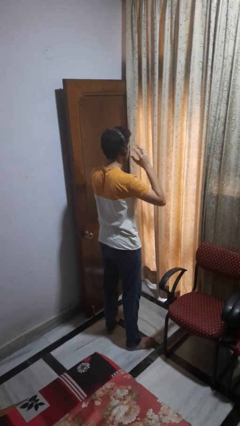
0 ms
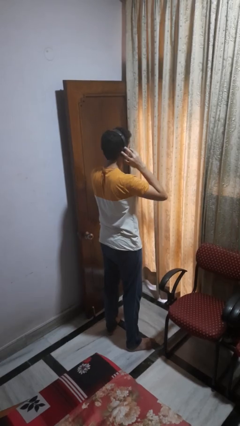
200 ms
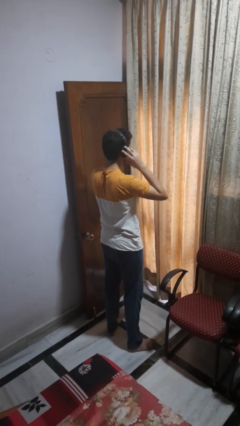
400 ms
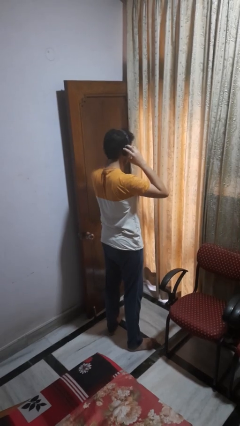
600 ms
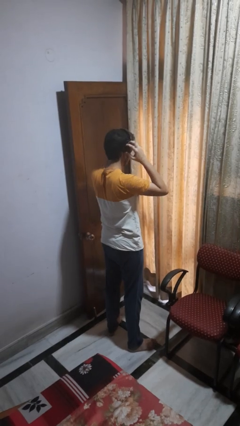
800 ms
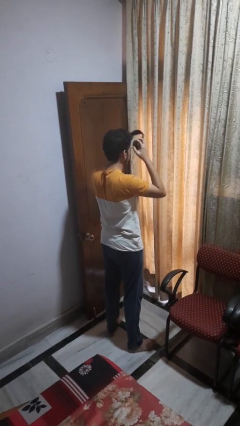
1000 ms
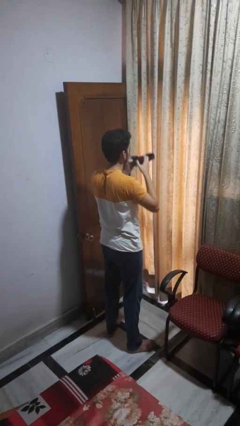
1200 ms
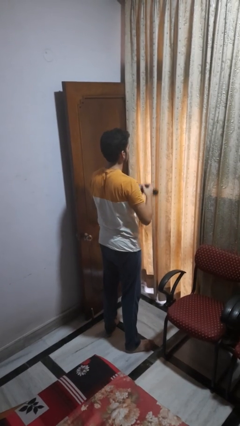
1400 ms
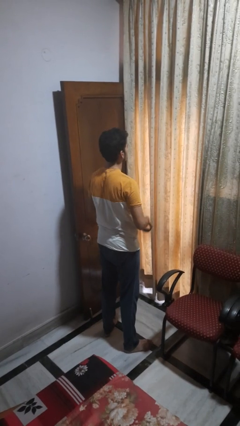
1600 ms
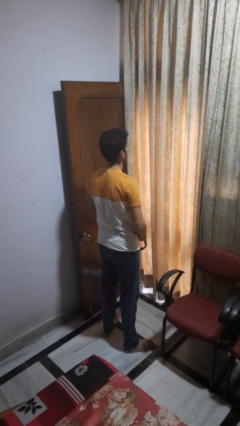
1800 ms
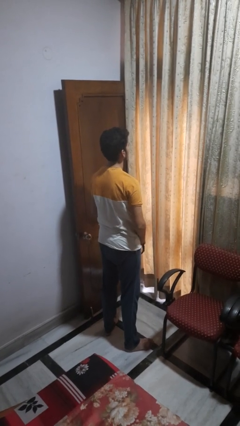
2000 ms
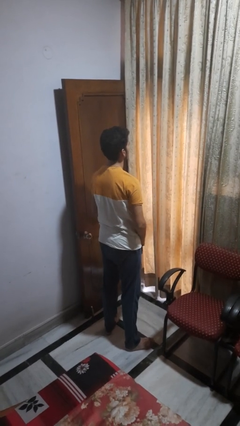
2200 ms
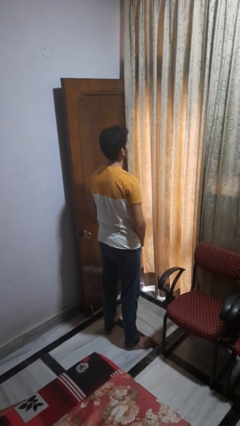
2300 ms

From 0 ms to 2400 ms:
person takes off headphones

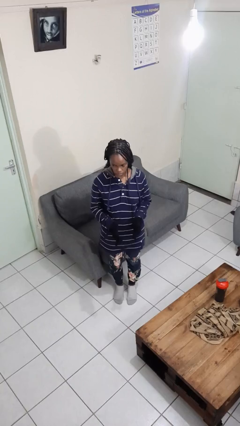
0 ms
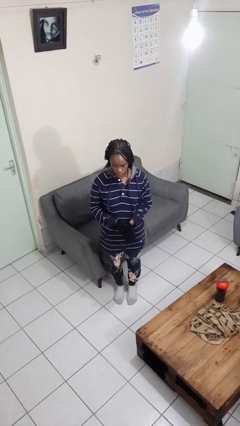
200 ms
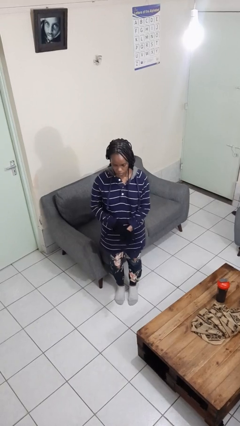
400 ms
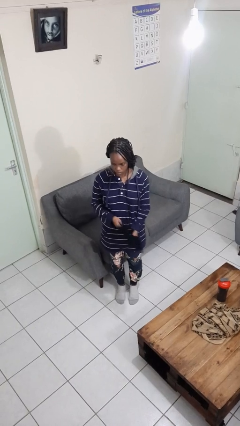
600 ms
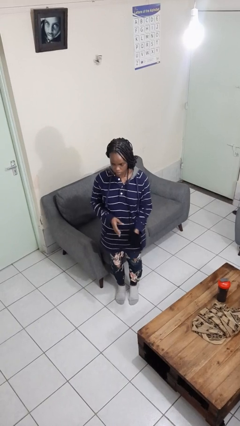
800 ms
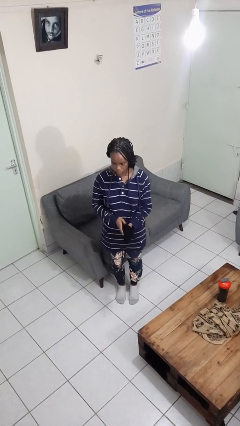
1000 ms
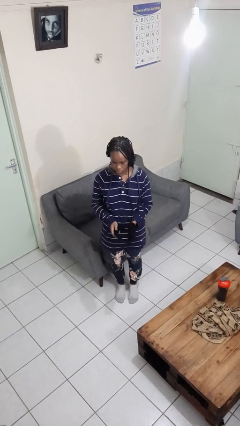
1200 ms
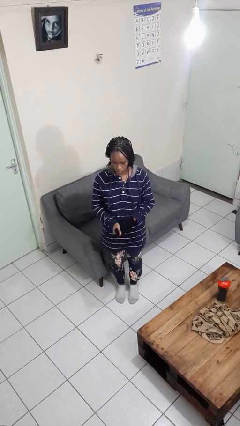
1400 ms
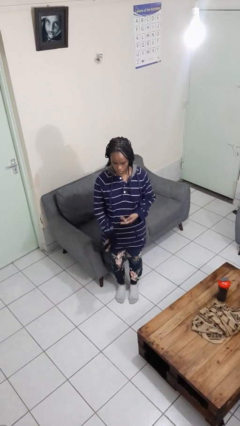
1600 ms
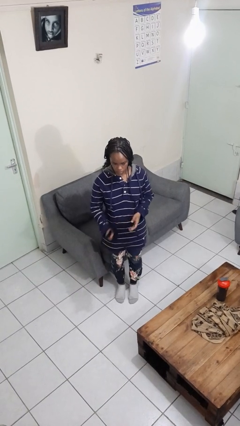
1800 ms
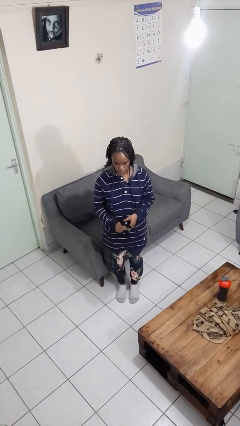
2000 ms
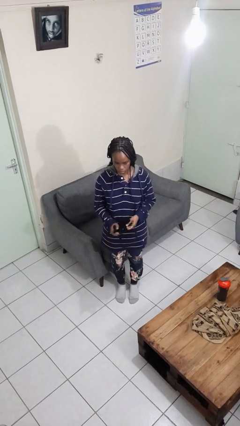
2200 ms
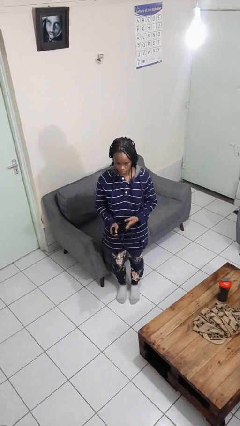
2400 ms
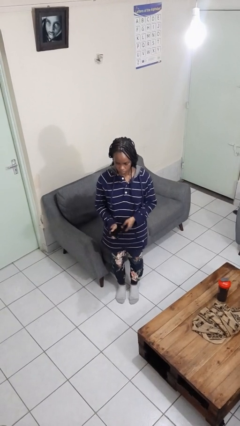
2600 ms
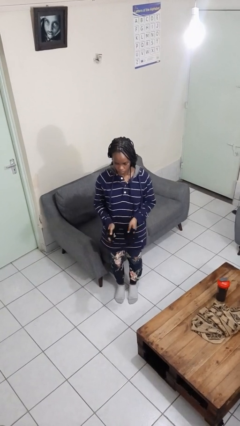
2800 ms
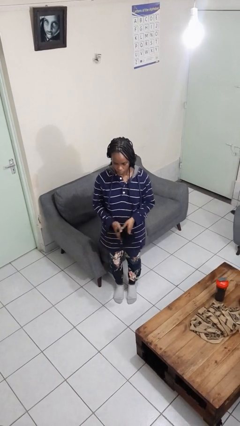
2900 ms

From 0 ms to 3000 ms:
person takes off gloves

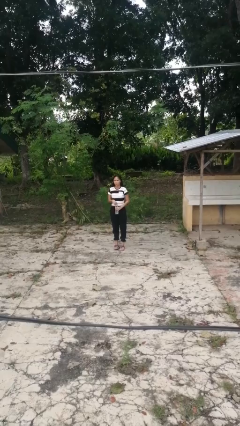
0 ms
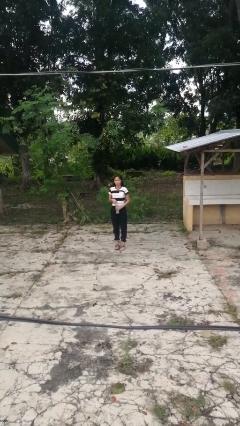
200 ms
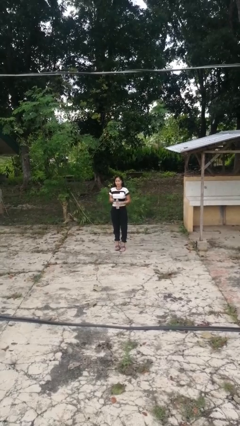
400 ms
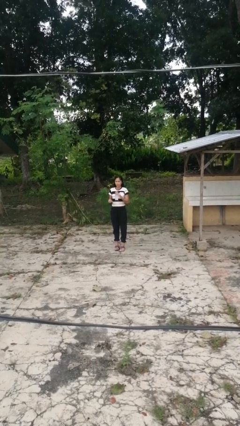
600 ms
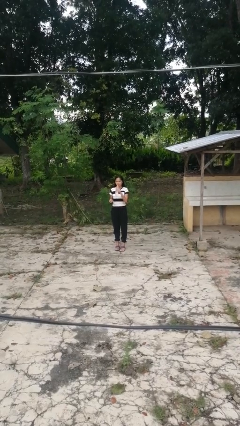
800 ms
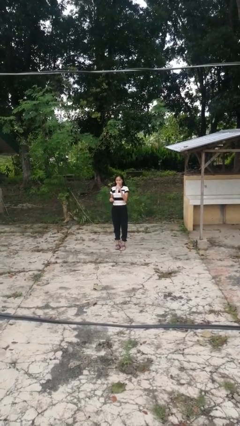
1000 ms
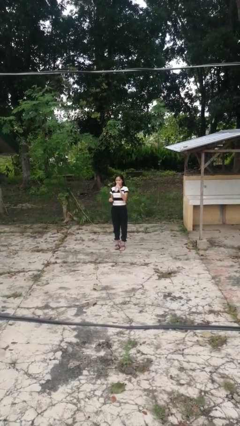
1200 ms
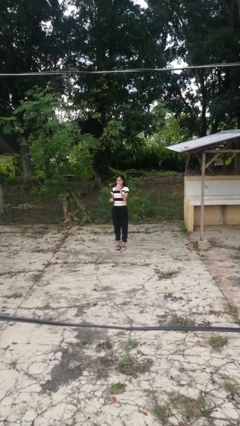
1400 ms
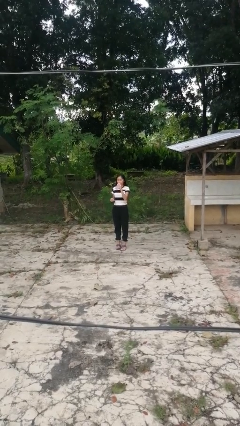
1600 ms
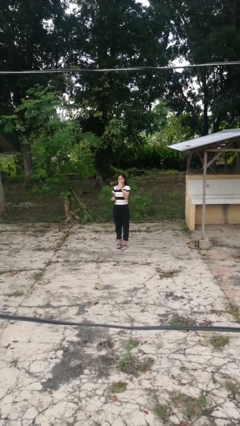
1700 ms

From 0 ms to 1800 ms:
person drinks from bottle

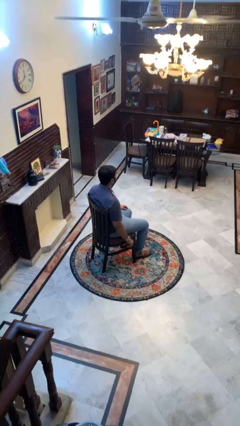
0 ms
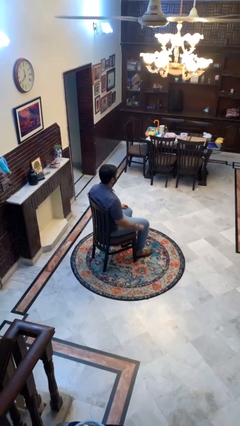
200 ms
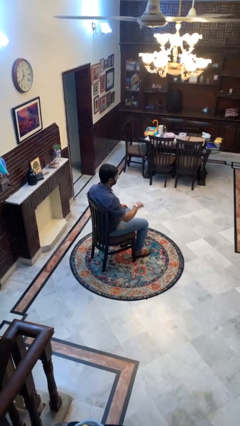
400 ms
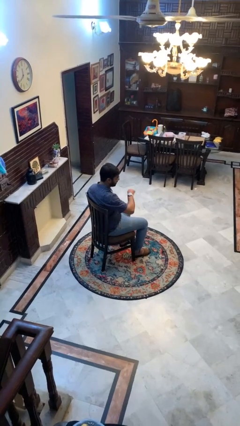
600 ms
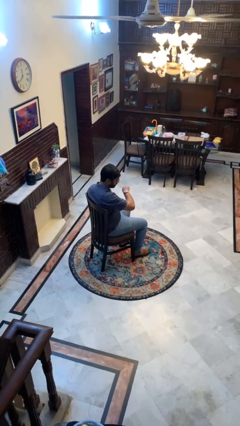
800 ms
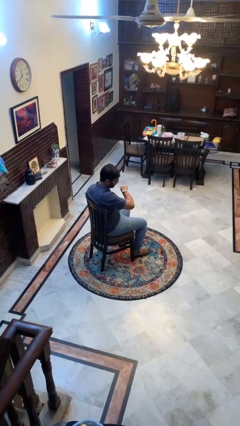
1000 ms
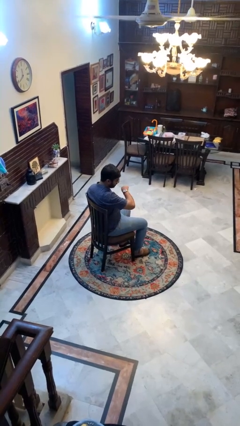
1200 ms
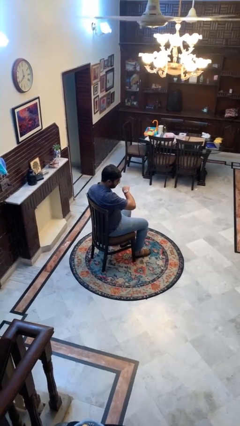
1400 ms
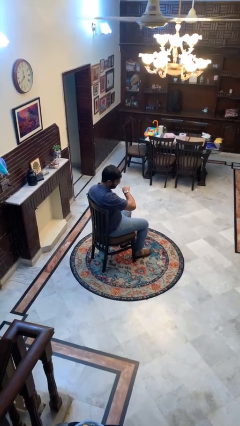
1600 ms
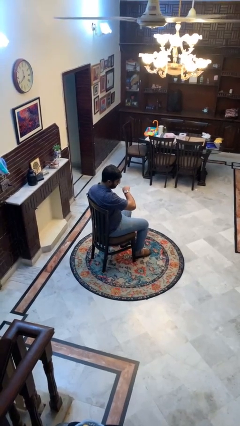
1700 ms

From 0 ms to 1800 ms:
person looks at wristwatch

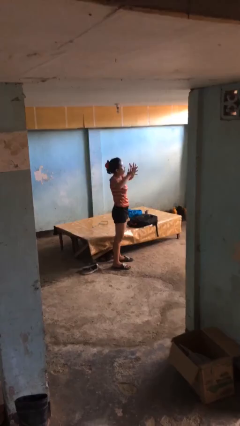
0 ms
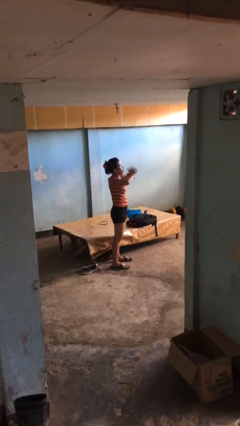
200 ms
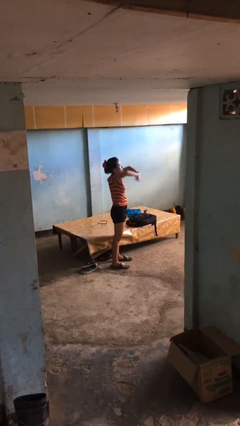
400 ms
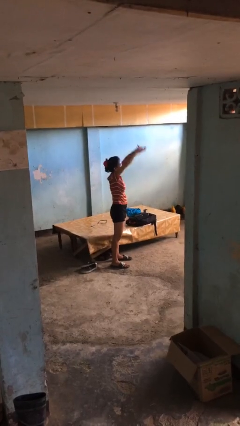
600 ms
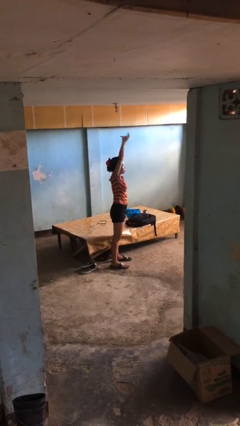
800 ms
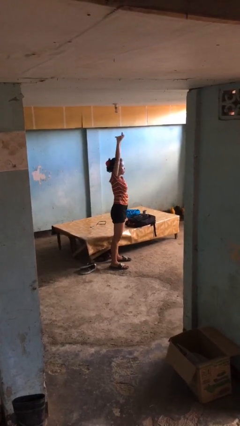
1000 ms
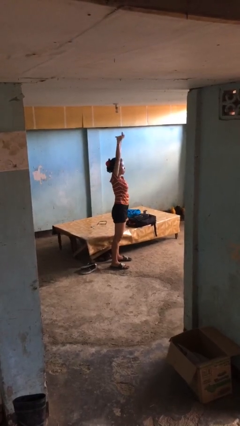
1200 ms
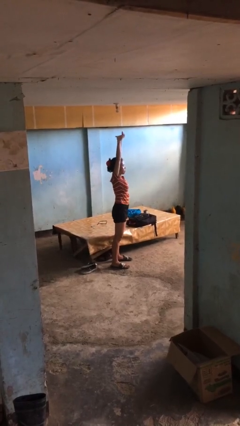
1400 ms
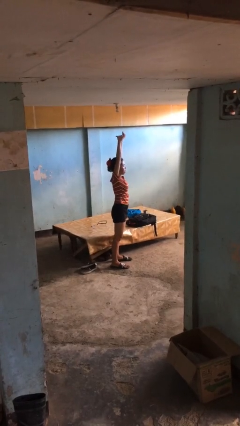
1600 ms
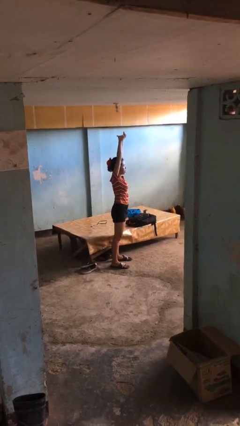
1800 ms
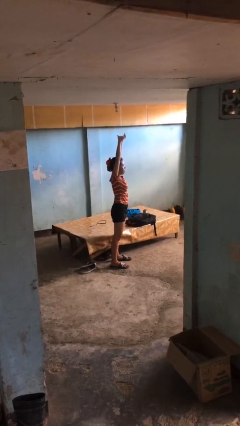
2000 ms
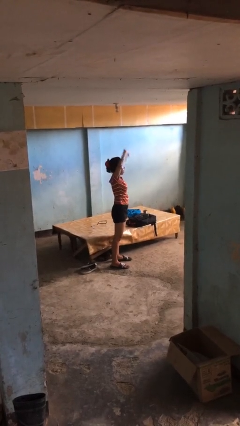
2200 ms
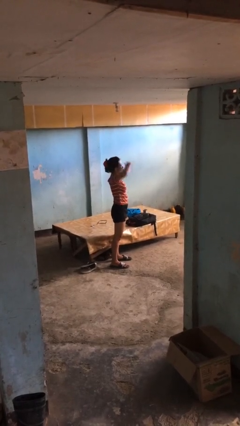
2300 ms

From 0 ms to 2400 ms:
person stretches arms over head

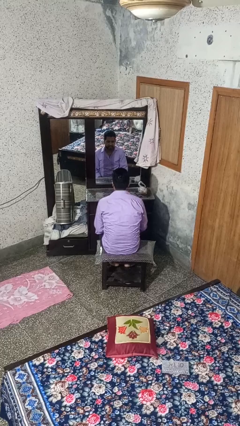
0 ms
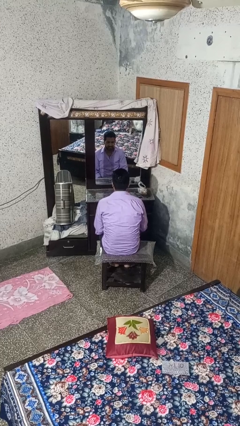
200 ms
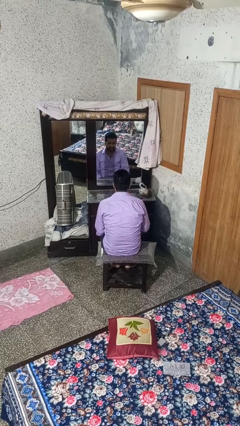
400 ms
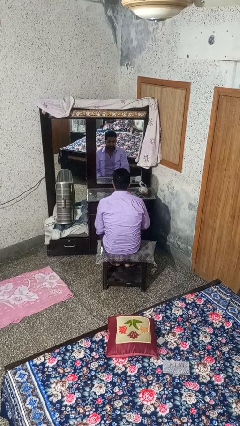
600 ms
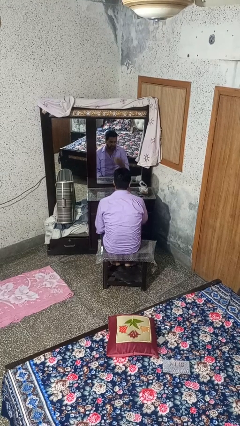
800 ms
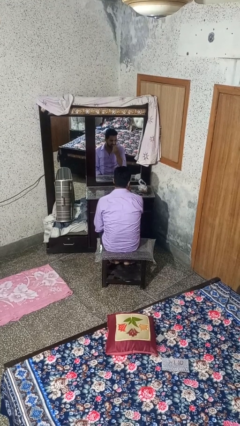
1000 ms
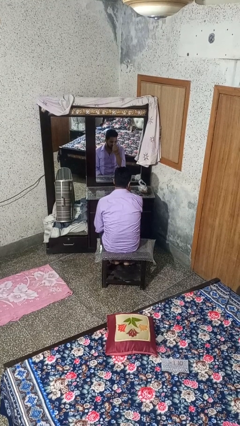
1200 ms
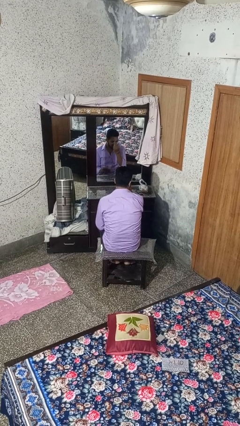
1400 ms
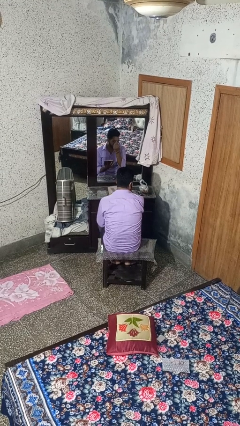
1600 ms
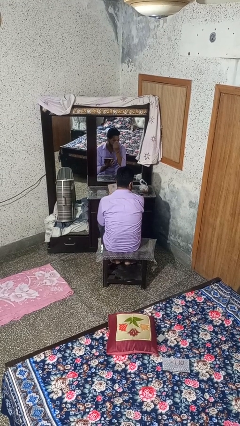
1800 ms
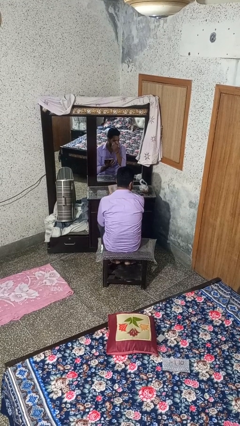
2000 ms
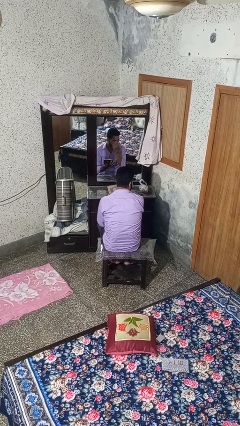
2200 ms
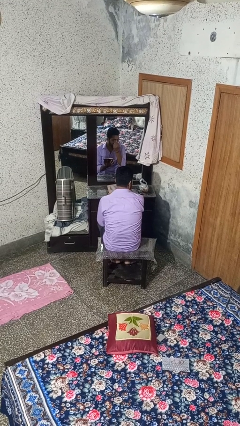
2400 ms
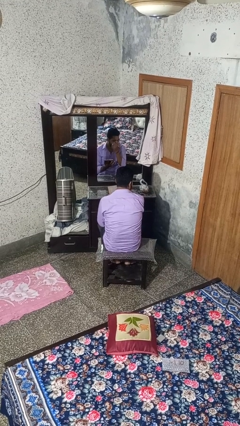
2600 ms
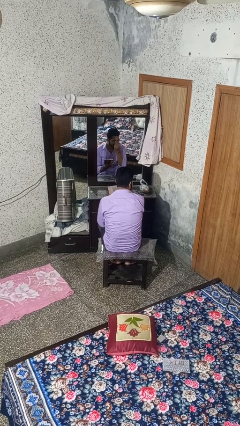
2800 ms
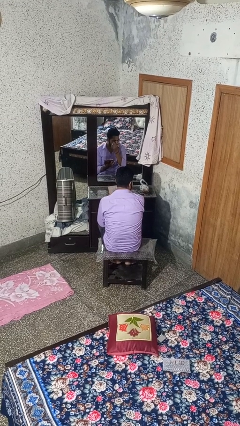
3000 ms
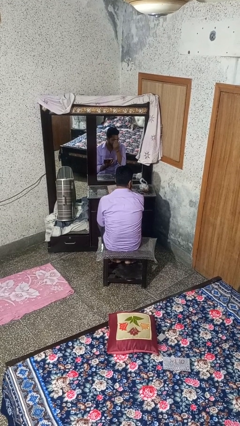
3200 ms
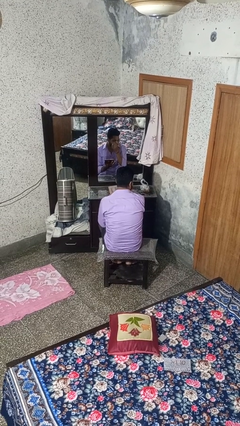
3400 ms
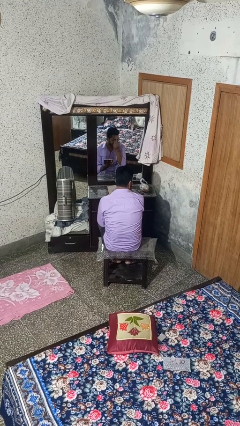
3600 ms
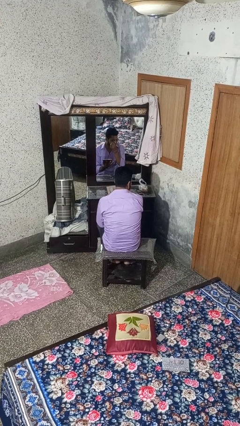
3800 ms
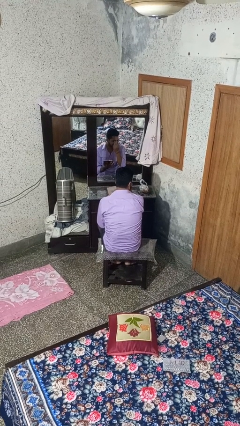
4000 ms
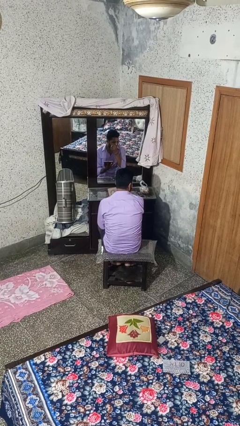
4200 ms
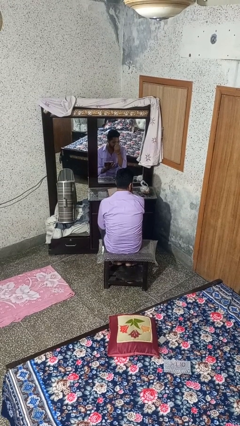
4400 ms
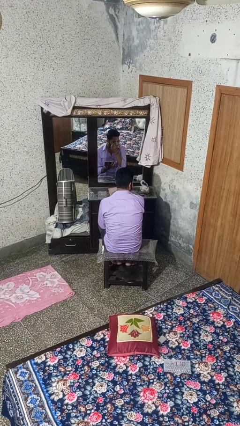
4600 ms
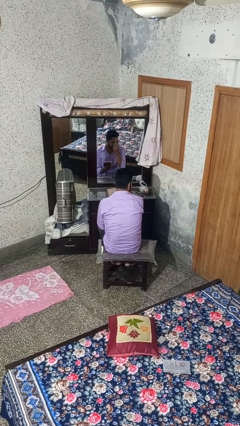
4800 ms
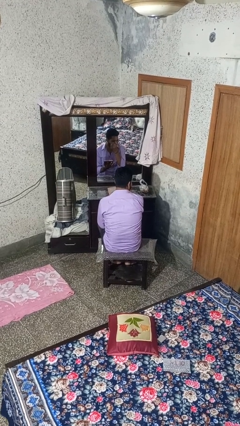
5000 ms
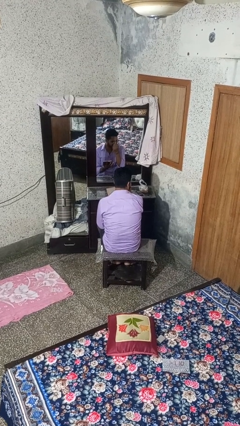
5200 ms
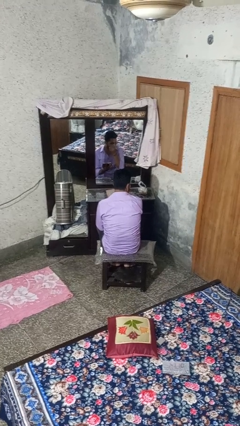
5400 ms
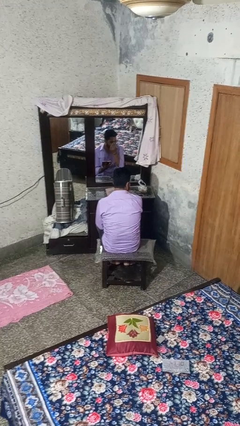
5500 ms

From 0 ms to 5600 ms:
person applies eye makeup

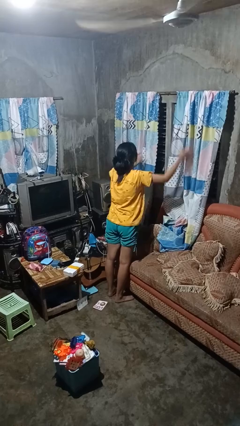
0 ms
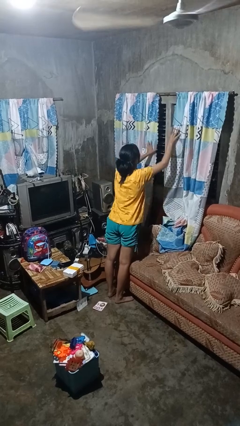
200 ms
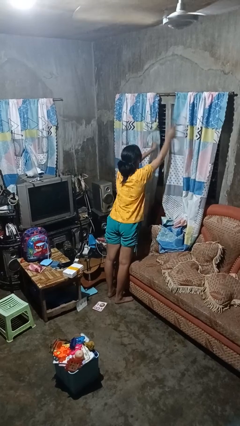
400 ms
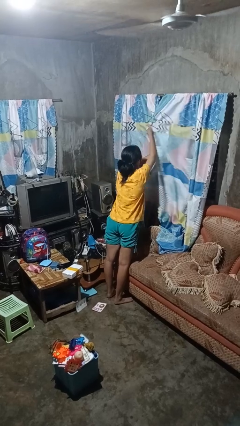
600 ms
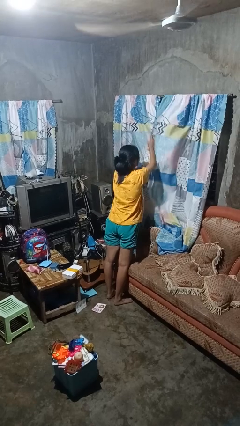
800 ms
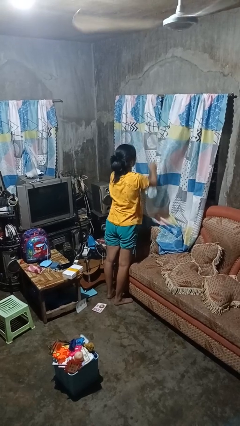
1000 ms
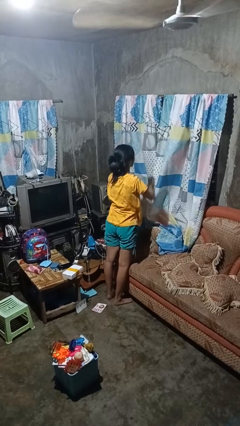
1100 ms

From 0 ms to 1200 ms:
person closes curtains
